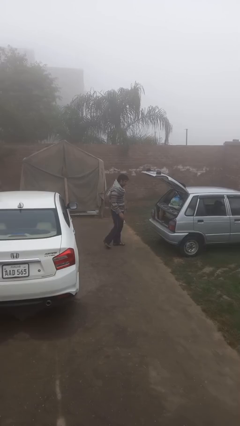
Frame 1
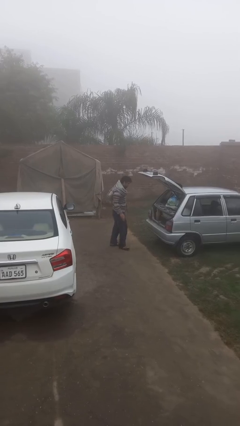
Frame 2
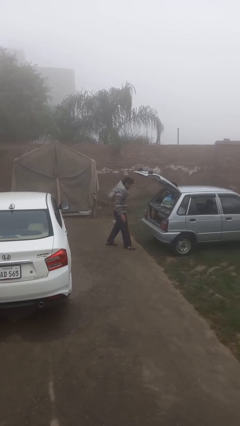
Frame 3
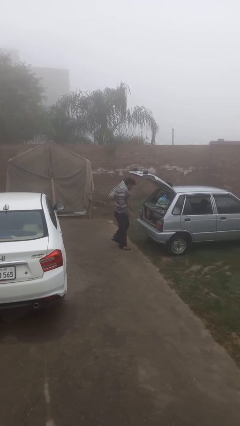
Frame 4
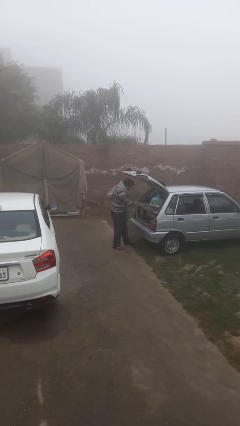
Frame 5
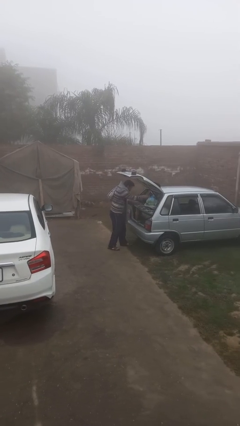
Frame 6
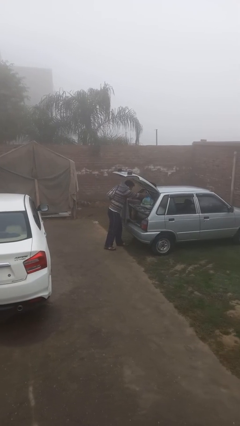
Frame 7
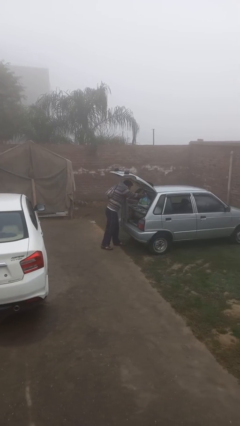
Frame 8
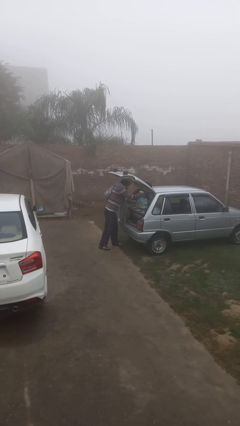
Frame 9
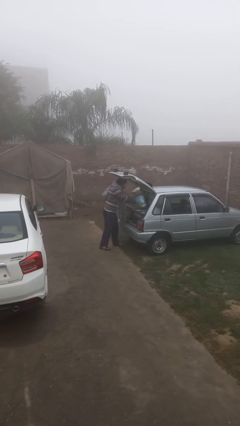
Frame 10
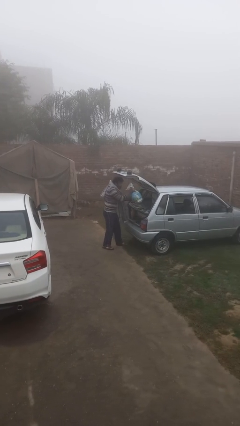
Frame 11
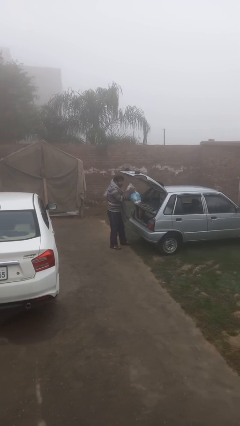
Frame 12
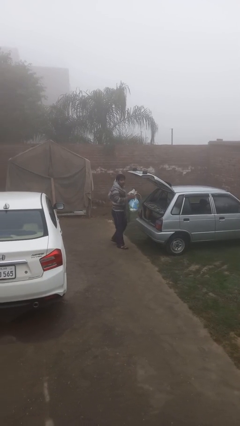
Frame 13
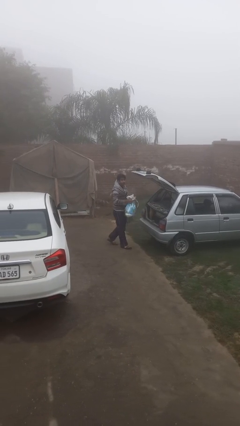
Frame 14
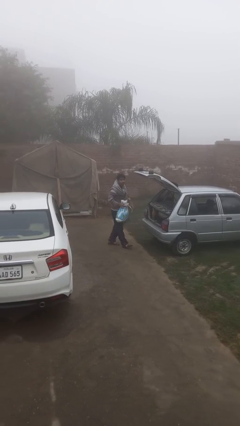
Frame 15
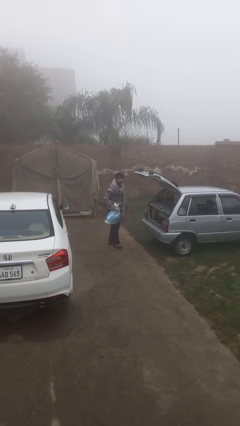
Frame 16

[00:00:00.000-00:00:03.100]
person unloads car

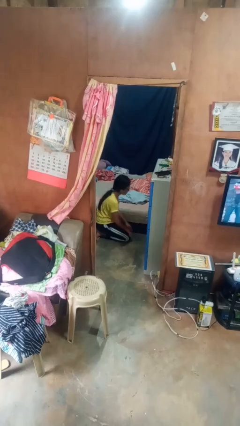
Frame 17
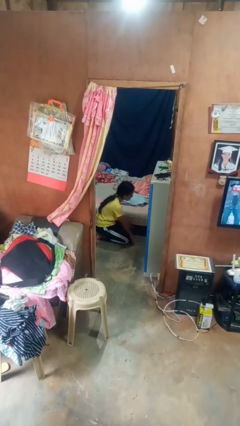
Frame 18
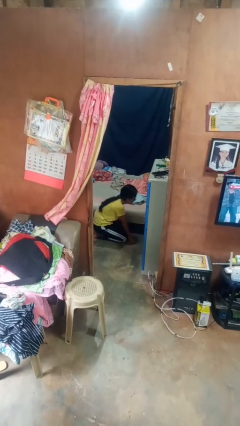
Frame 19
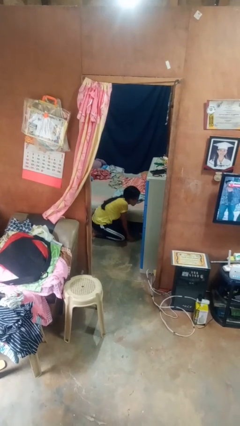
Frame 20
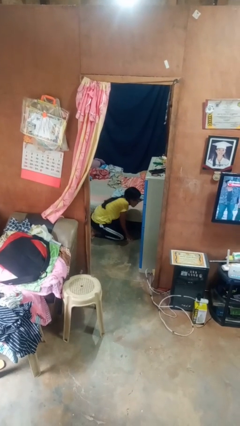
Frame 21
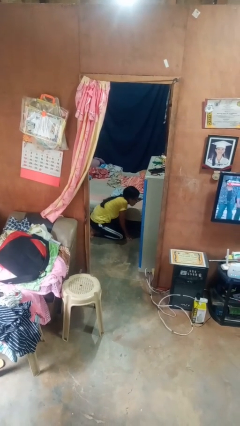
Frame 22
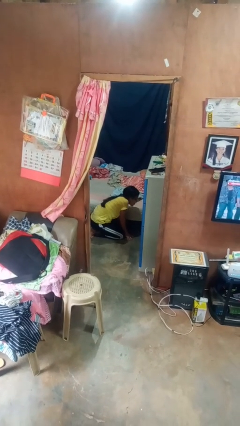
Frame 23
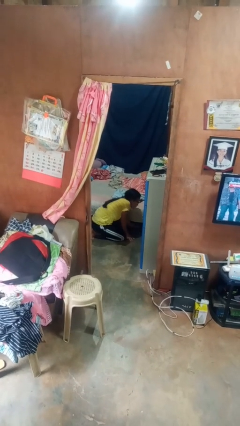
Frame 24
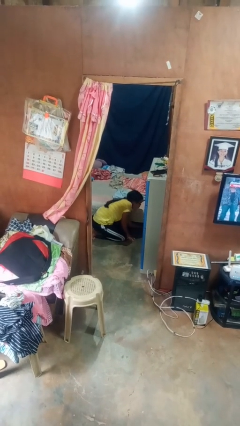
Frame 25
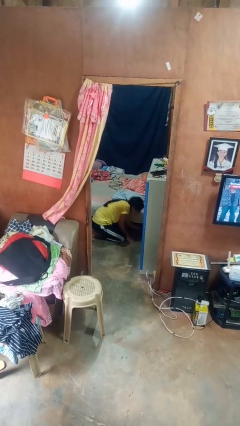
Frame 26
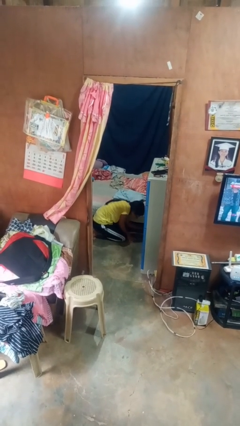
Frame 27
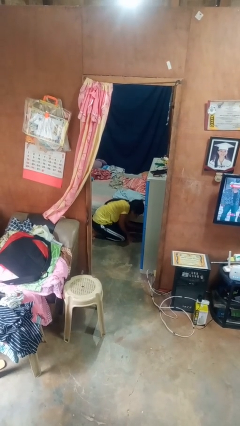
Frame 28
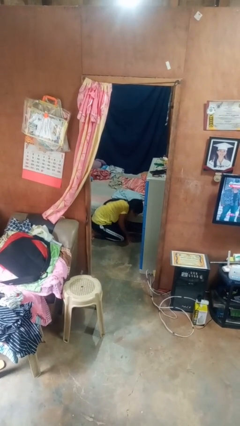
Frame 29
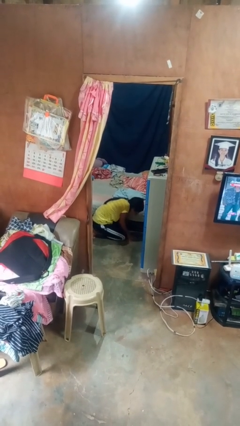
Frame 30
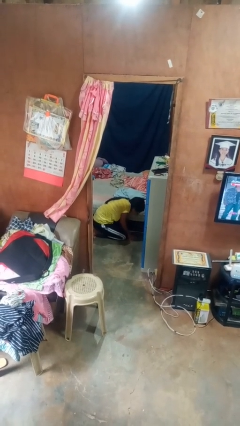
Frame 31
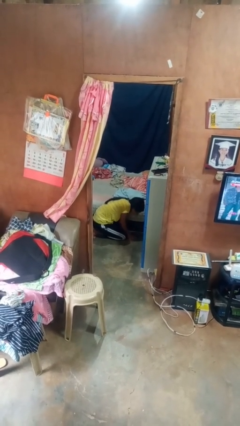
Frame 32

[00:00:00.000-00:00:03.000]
person searches under bed

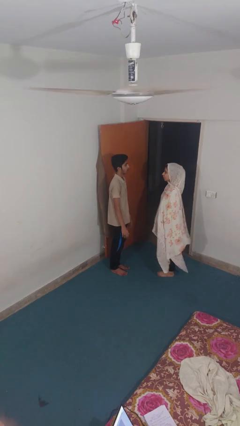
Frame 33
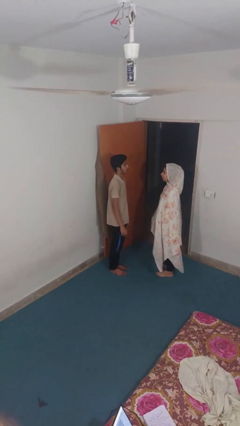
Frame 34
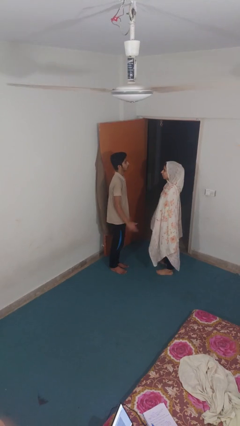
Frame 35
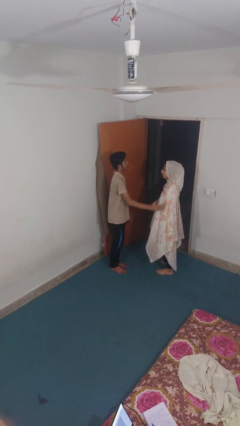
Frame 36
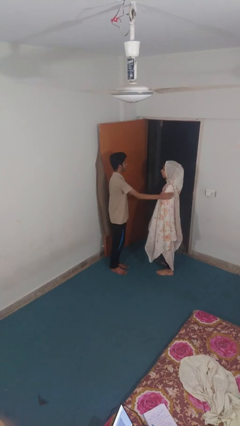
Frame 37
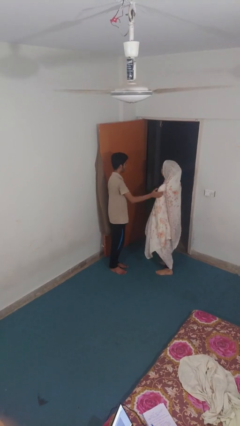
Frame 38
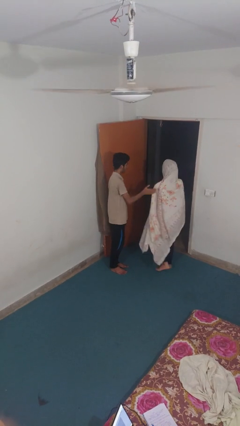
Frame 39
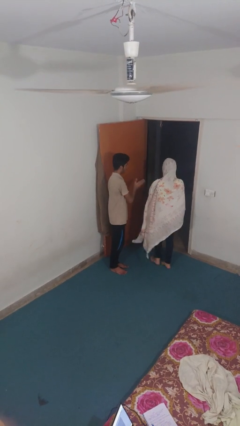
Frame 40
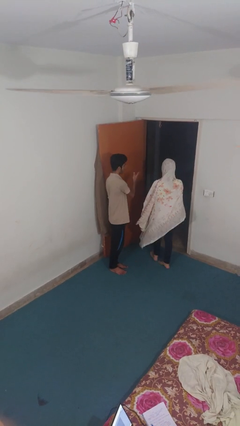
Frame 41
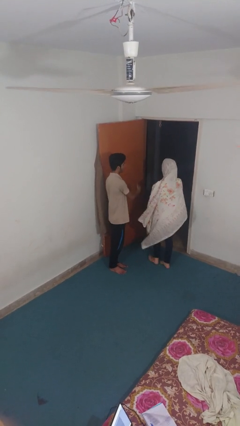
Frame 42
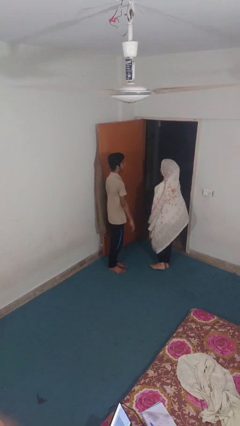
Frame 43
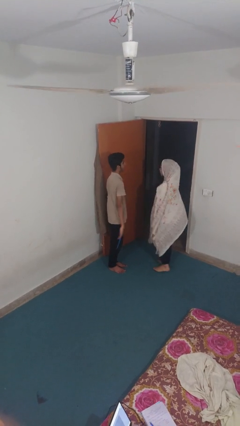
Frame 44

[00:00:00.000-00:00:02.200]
person shoves person

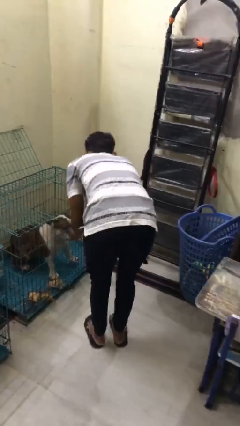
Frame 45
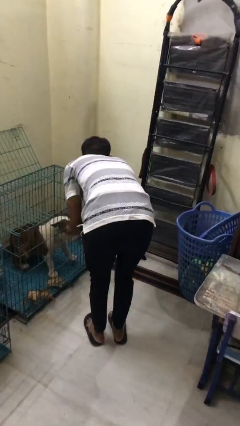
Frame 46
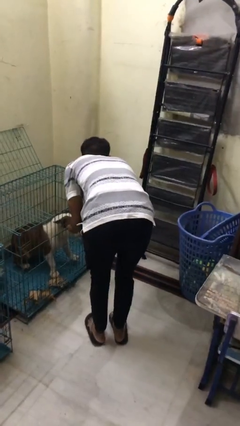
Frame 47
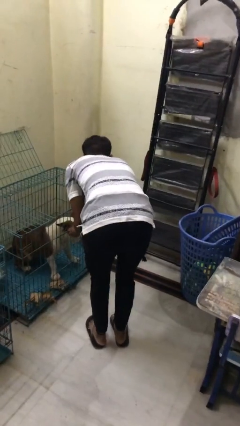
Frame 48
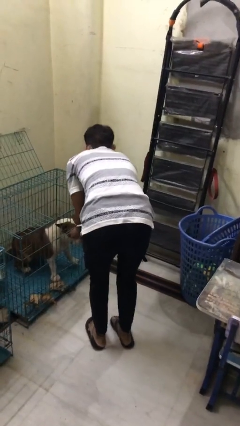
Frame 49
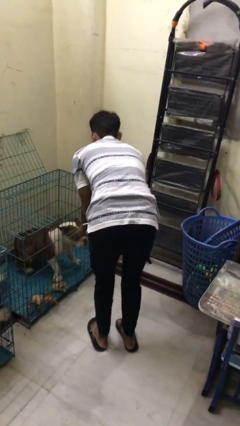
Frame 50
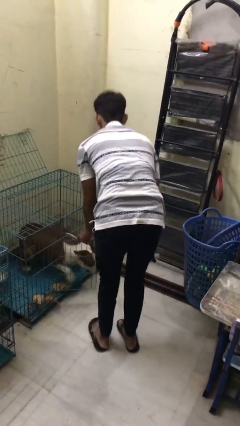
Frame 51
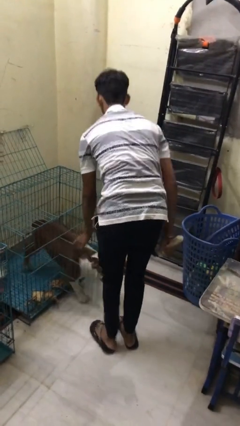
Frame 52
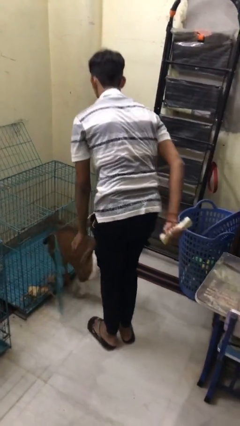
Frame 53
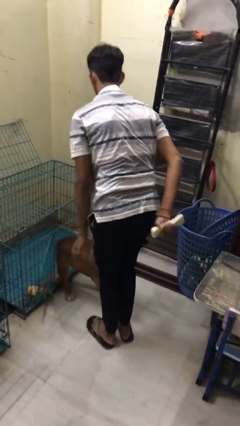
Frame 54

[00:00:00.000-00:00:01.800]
person uncrates dog

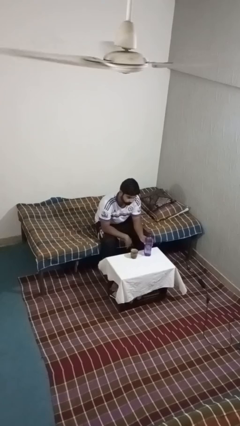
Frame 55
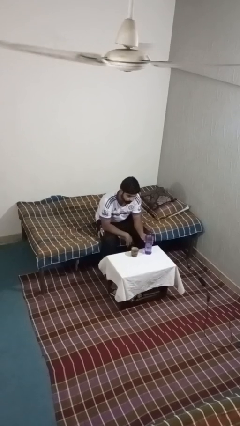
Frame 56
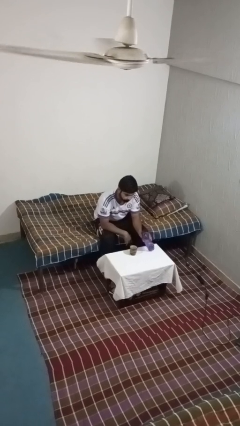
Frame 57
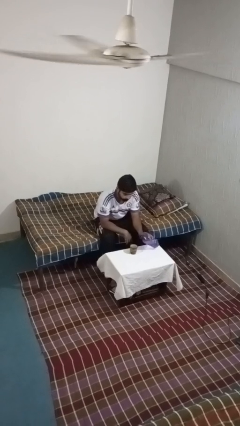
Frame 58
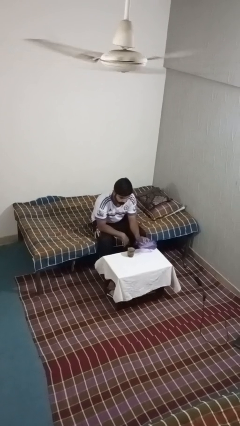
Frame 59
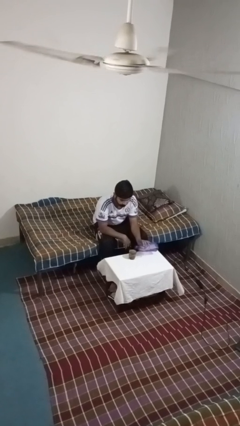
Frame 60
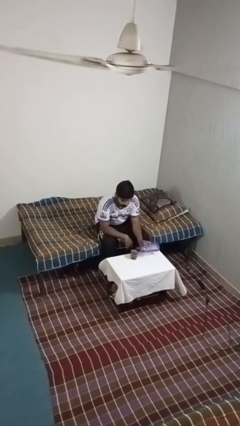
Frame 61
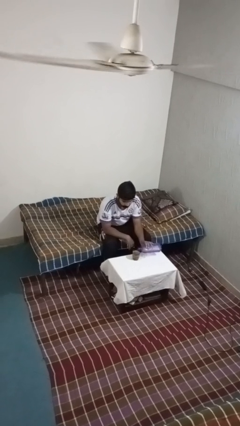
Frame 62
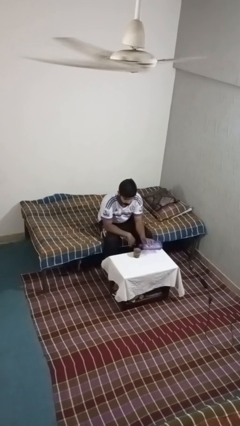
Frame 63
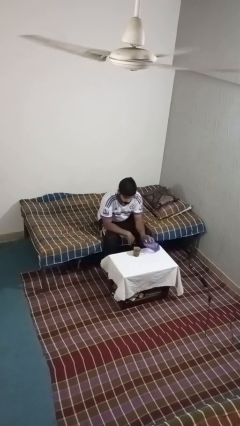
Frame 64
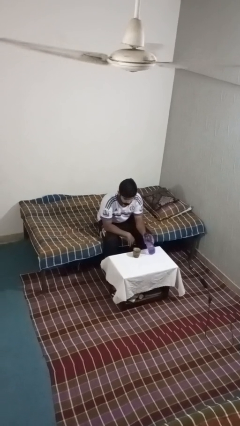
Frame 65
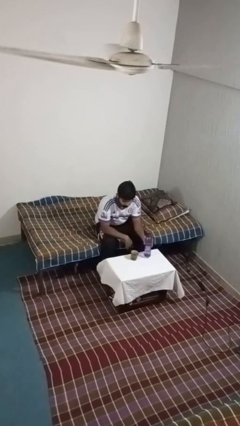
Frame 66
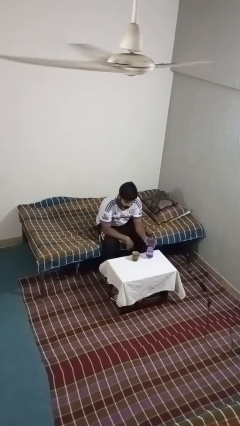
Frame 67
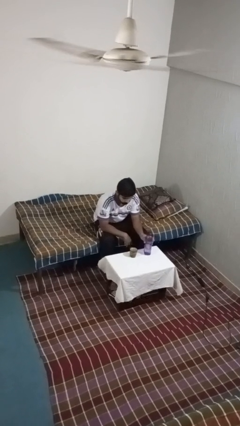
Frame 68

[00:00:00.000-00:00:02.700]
person pours liquid into cup

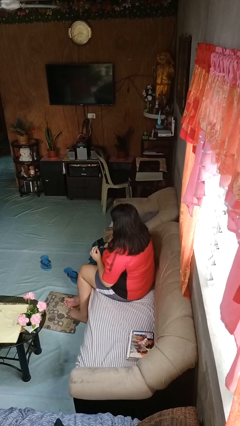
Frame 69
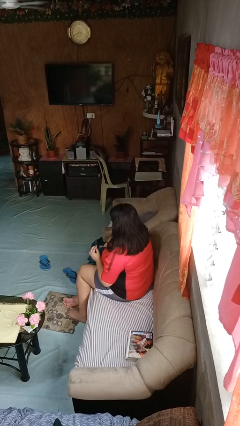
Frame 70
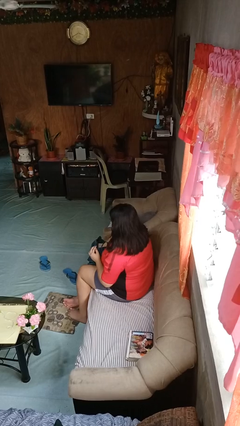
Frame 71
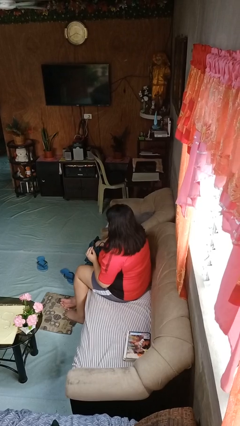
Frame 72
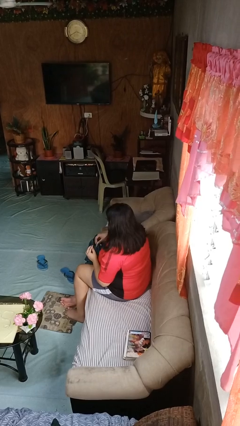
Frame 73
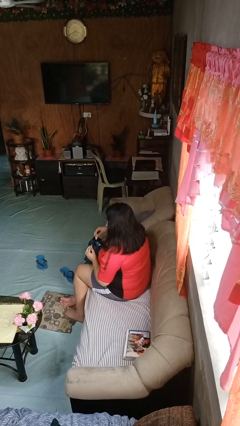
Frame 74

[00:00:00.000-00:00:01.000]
person eats snack from bag

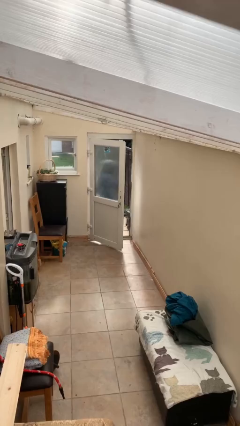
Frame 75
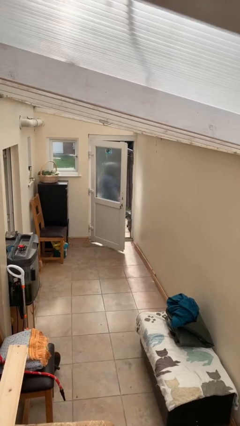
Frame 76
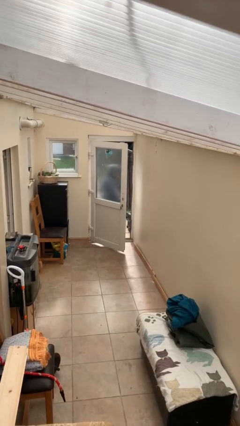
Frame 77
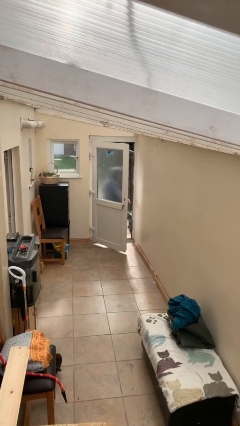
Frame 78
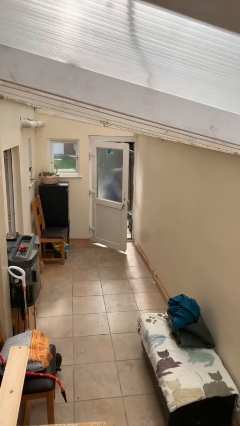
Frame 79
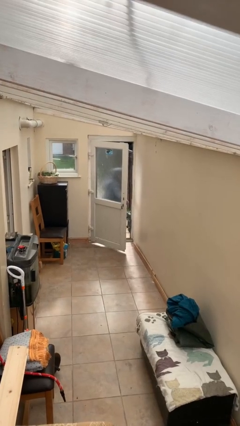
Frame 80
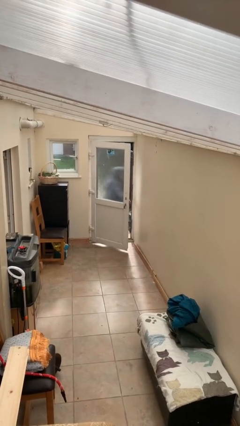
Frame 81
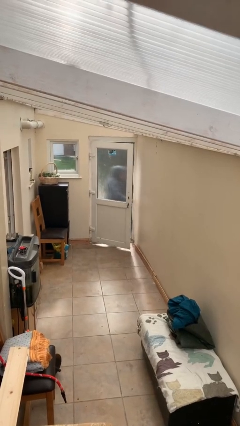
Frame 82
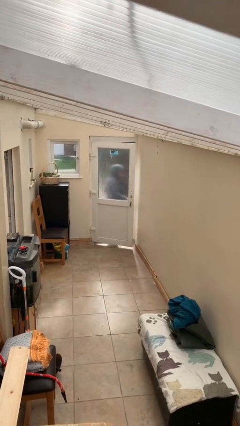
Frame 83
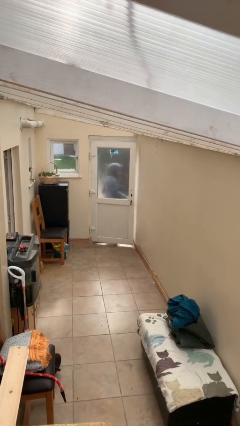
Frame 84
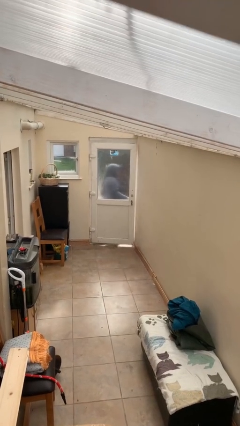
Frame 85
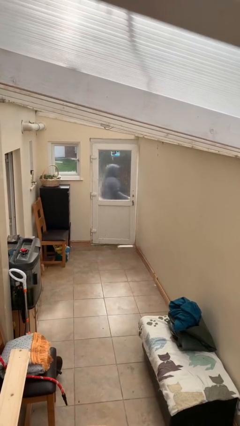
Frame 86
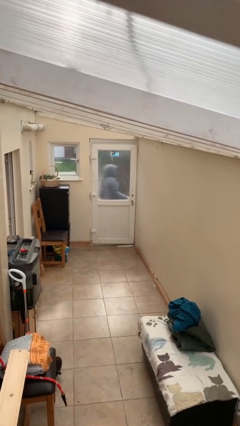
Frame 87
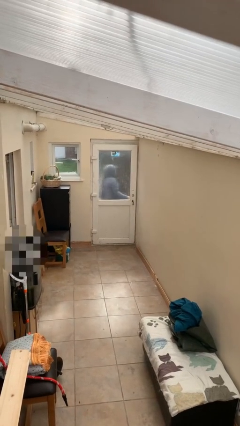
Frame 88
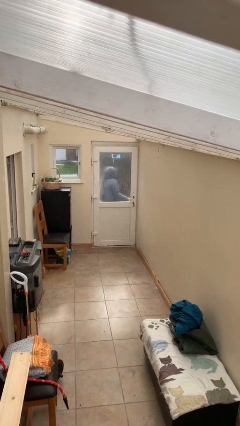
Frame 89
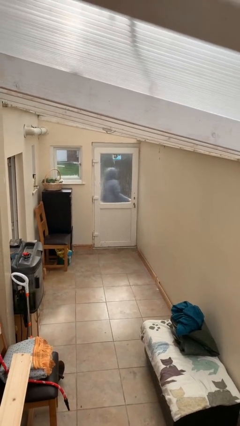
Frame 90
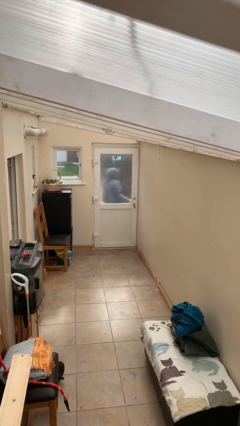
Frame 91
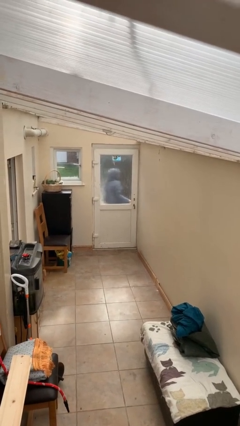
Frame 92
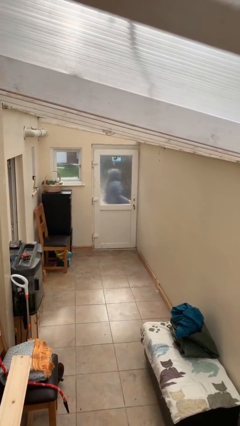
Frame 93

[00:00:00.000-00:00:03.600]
person closes facility door
